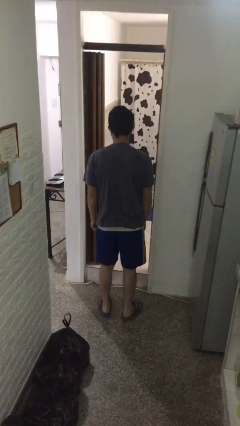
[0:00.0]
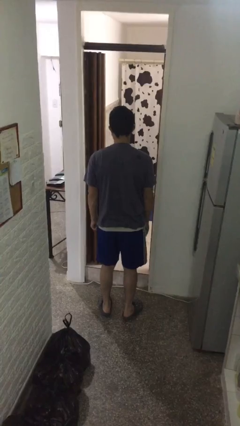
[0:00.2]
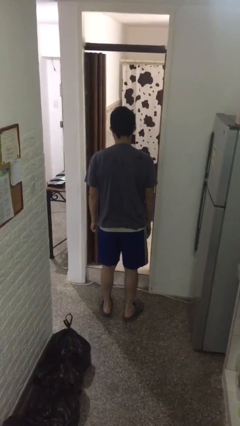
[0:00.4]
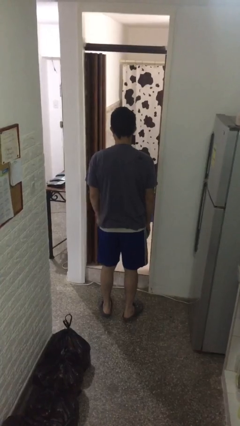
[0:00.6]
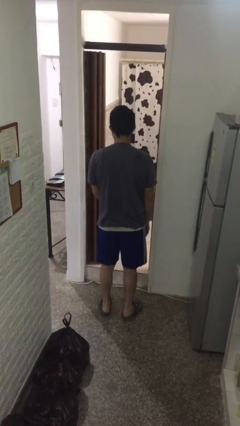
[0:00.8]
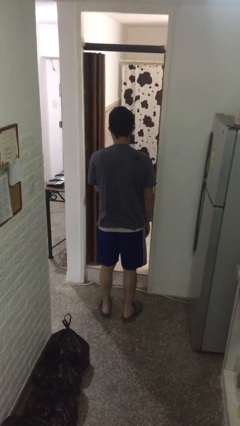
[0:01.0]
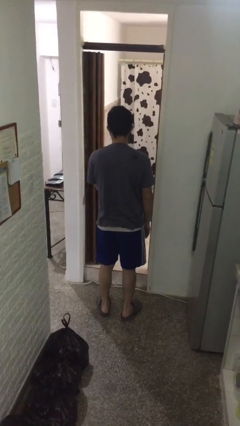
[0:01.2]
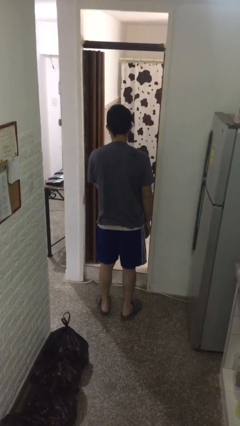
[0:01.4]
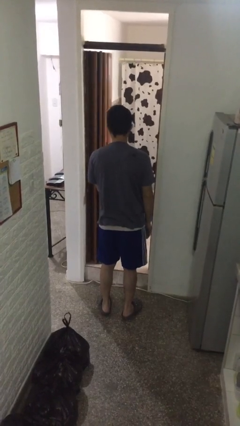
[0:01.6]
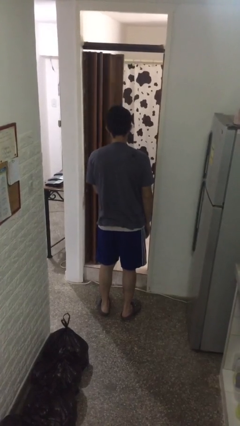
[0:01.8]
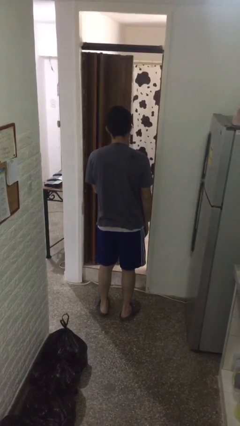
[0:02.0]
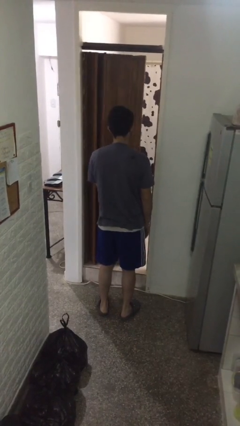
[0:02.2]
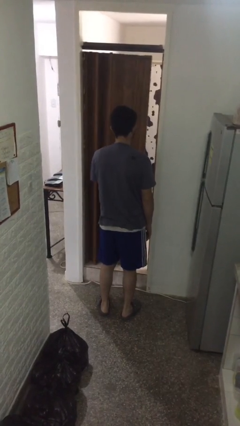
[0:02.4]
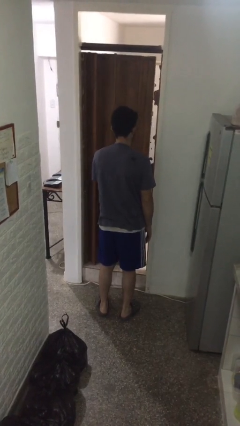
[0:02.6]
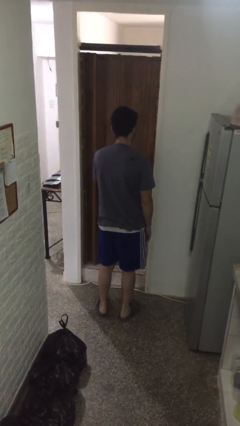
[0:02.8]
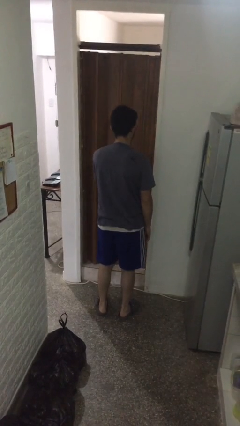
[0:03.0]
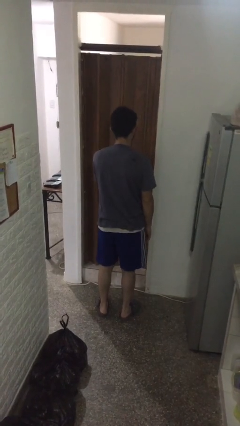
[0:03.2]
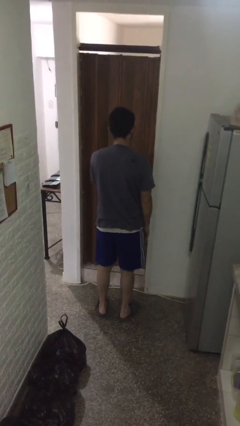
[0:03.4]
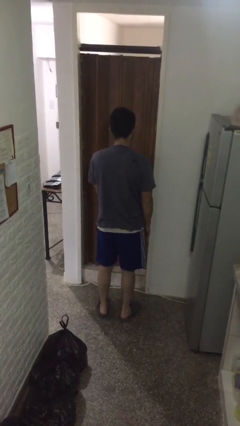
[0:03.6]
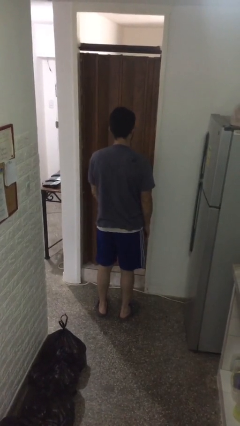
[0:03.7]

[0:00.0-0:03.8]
person closes sliding door

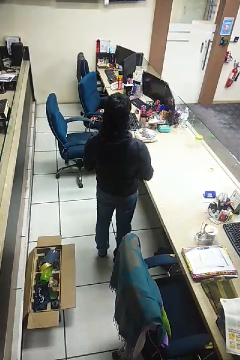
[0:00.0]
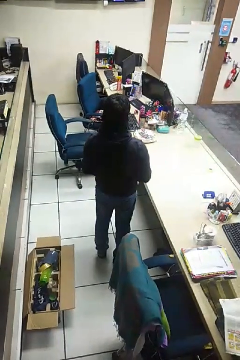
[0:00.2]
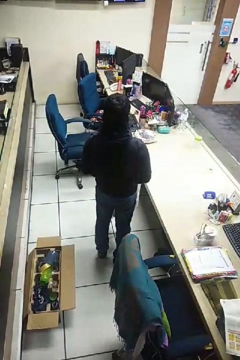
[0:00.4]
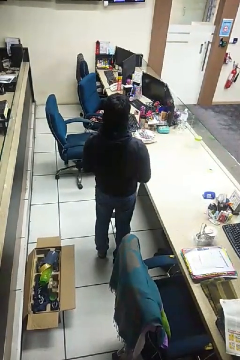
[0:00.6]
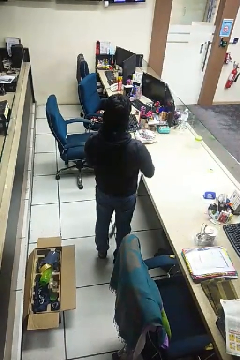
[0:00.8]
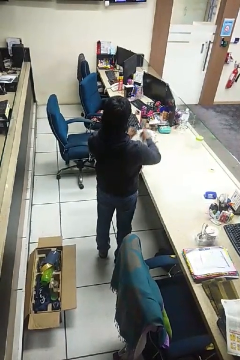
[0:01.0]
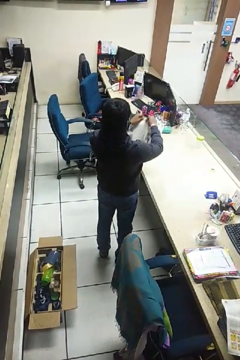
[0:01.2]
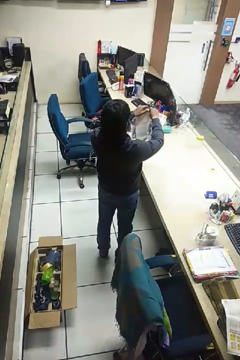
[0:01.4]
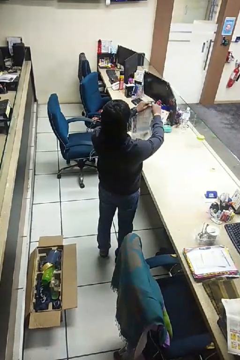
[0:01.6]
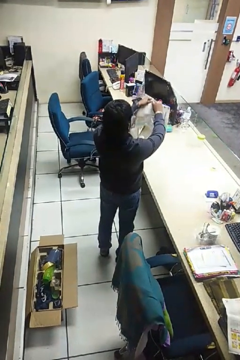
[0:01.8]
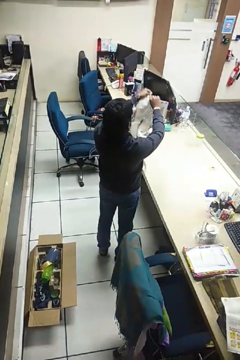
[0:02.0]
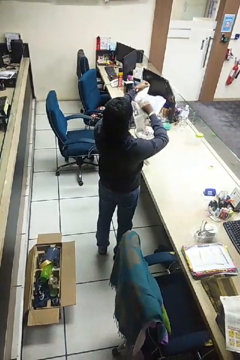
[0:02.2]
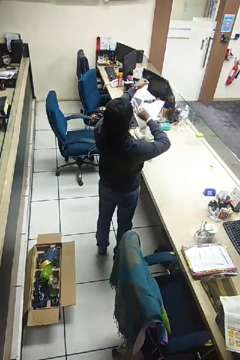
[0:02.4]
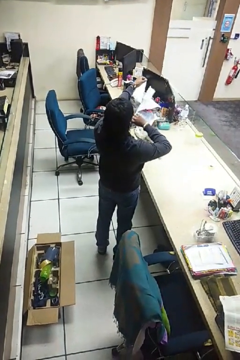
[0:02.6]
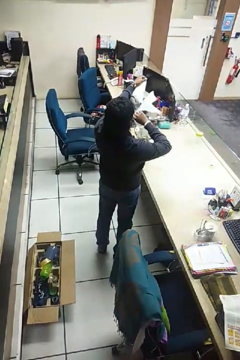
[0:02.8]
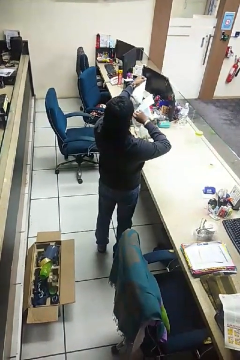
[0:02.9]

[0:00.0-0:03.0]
person tears paper

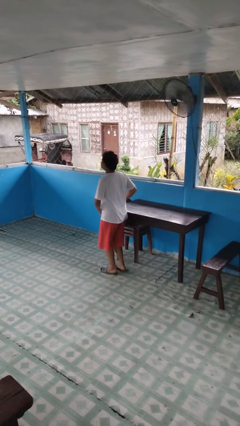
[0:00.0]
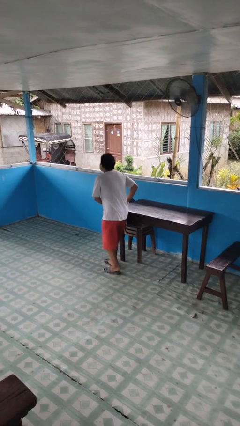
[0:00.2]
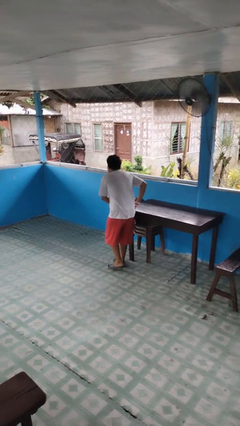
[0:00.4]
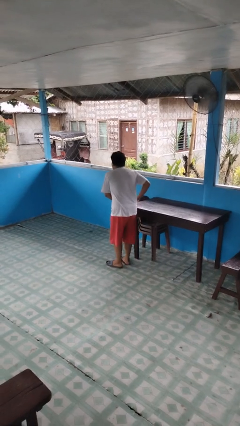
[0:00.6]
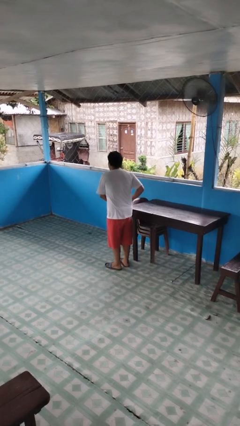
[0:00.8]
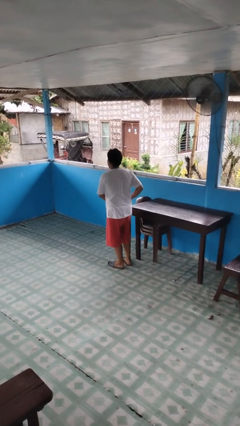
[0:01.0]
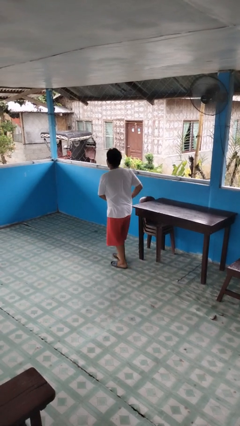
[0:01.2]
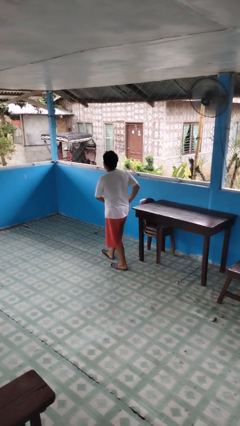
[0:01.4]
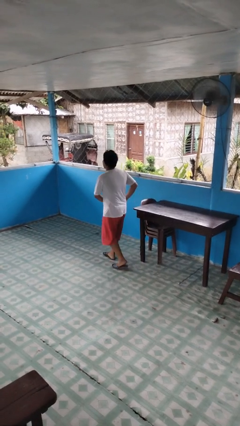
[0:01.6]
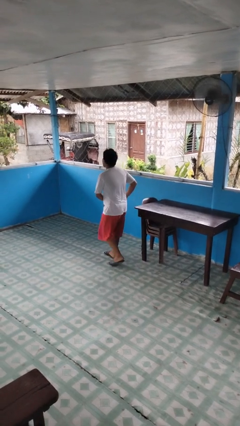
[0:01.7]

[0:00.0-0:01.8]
person bumps into table

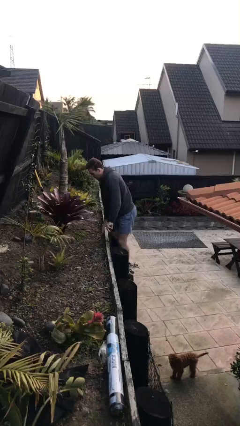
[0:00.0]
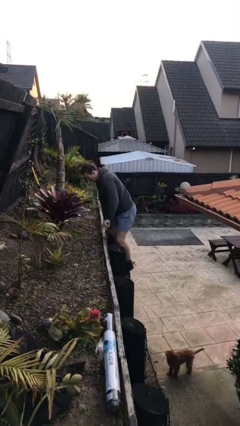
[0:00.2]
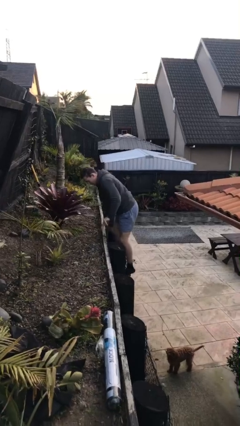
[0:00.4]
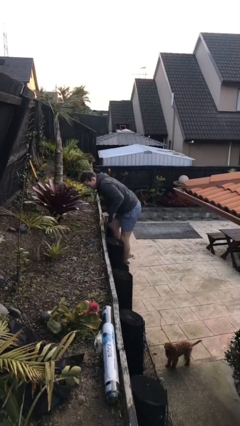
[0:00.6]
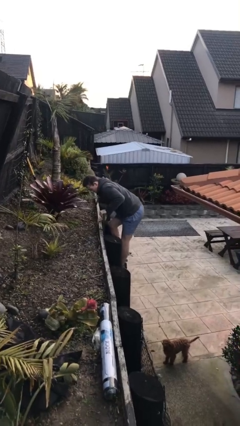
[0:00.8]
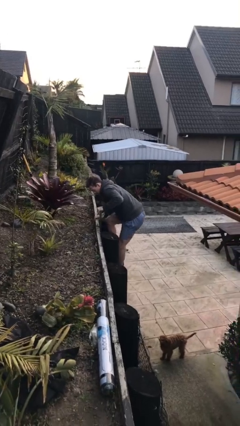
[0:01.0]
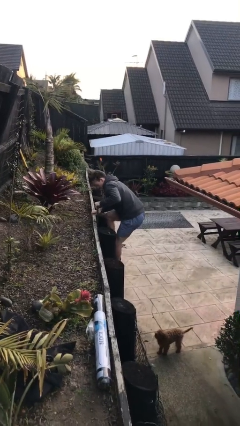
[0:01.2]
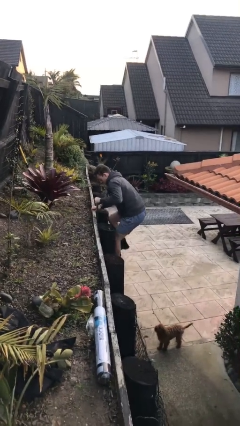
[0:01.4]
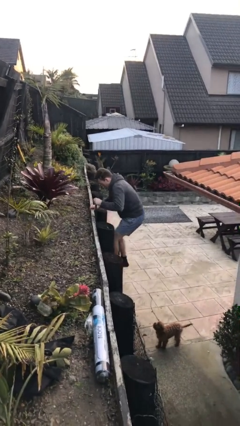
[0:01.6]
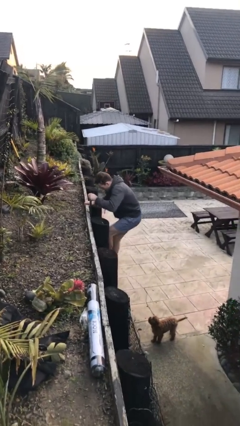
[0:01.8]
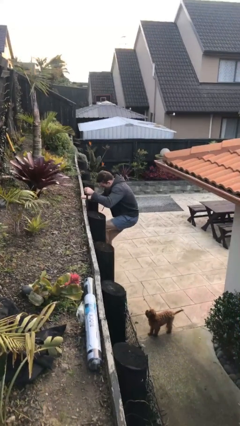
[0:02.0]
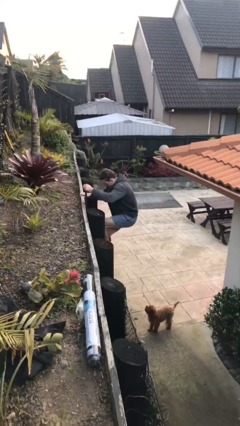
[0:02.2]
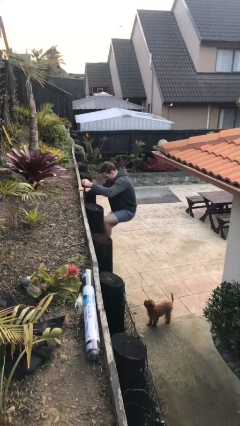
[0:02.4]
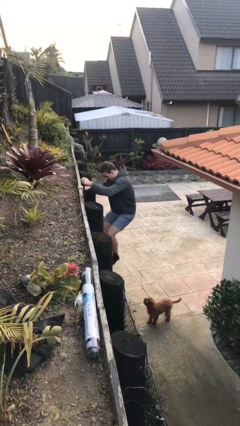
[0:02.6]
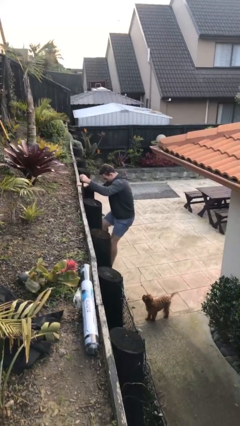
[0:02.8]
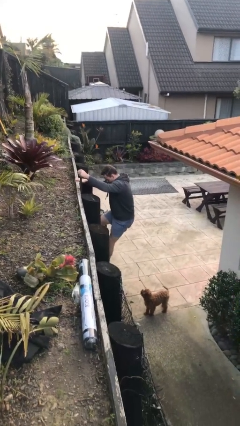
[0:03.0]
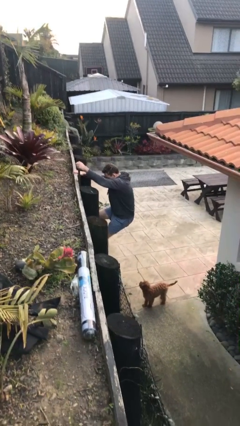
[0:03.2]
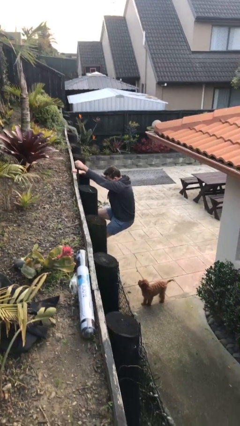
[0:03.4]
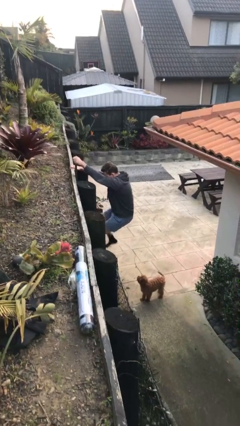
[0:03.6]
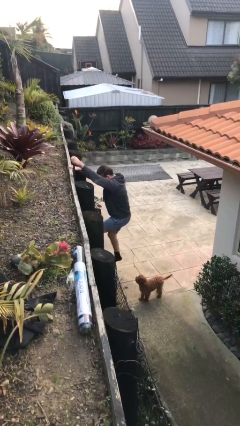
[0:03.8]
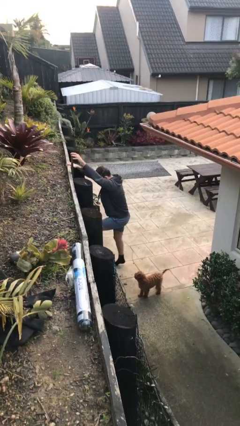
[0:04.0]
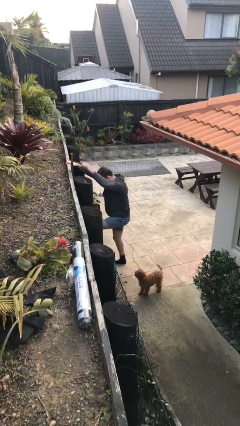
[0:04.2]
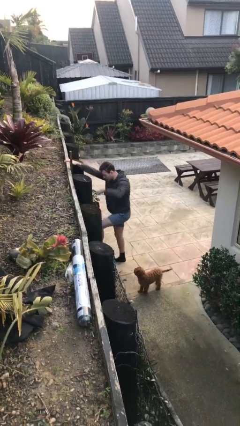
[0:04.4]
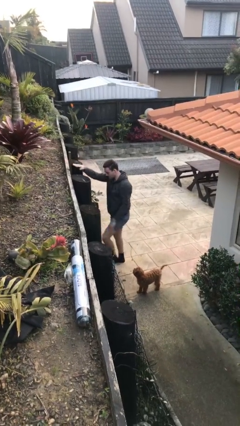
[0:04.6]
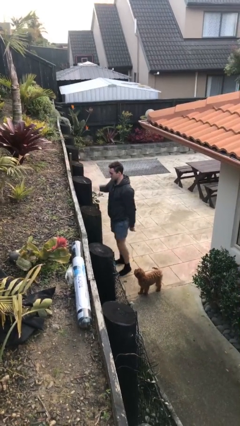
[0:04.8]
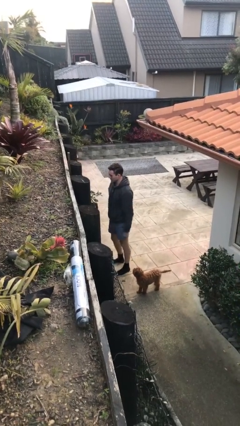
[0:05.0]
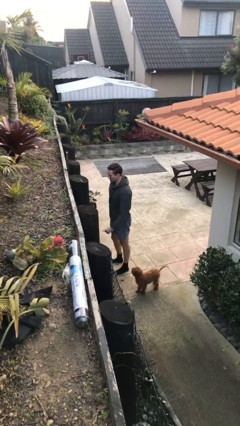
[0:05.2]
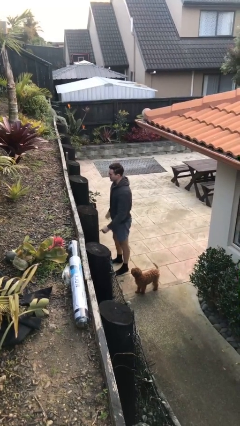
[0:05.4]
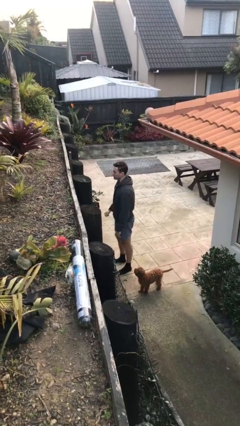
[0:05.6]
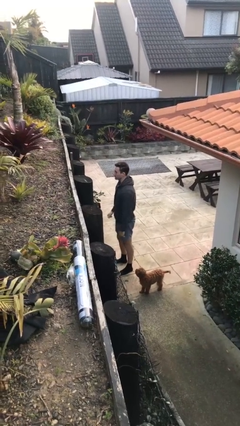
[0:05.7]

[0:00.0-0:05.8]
person climbs down ladder

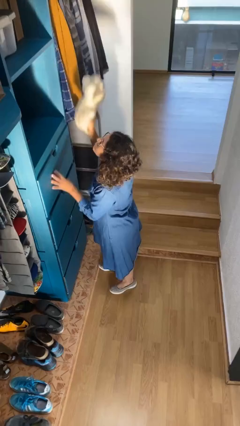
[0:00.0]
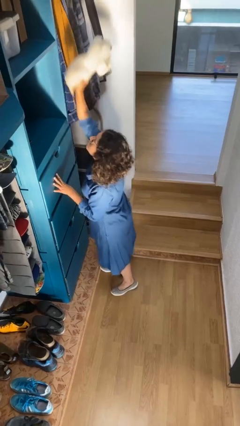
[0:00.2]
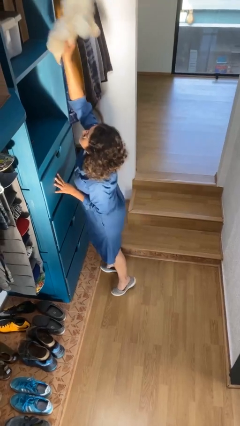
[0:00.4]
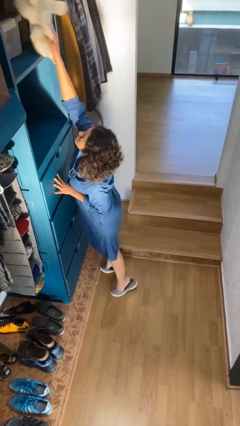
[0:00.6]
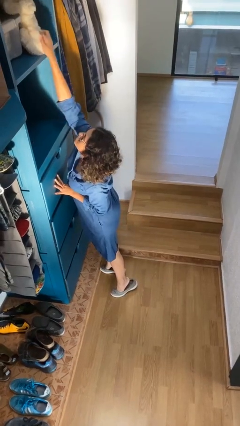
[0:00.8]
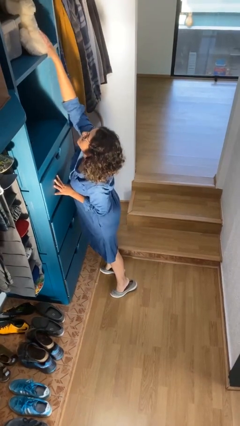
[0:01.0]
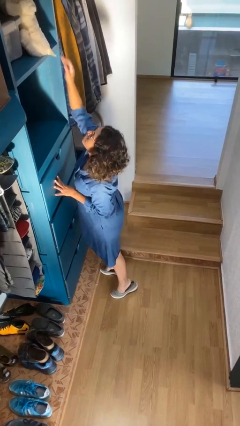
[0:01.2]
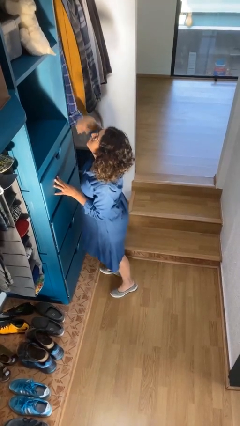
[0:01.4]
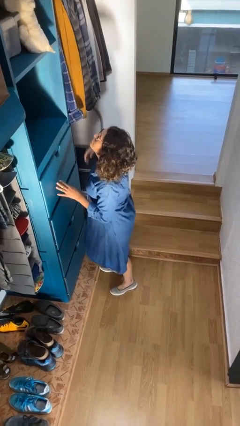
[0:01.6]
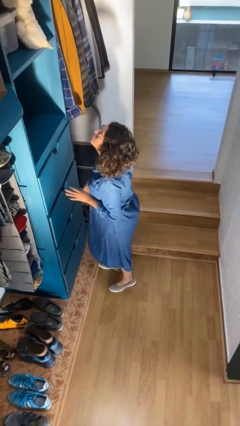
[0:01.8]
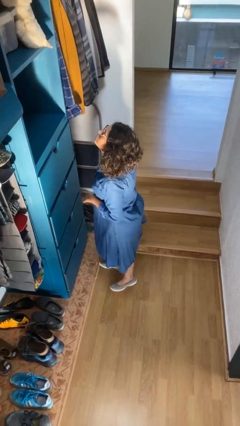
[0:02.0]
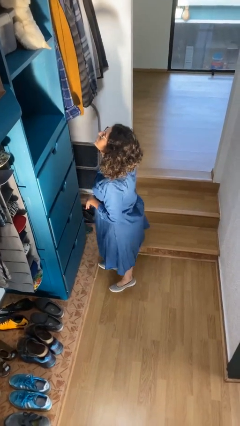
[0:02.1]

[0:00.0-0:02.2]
person puts down object on shelf

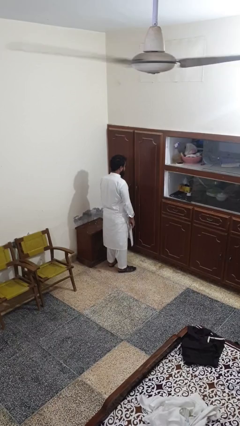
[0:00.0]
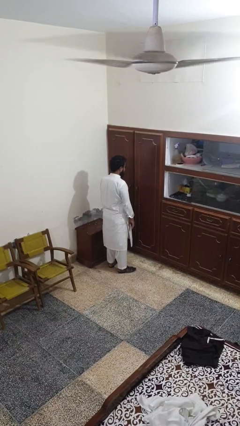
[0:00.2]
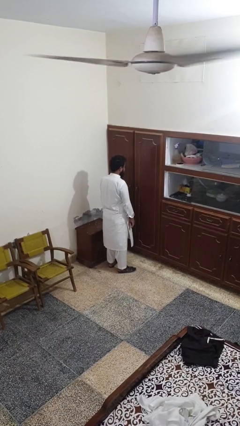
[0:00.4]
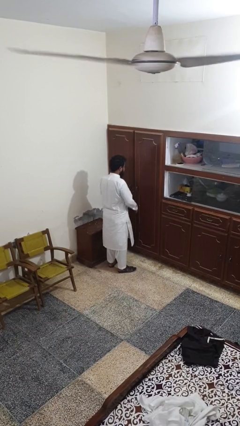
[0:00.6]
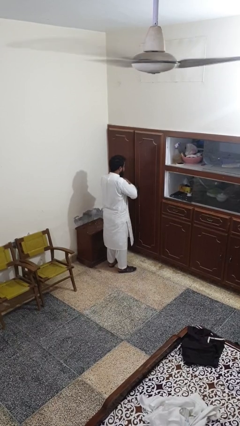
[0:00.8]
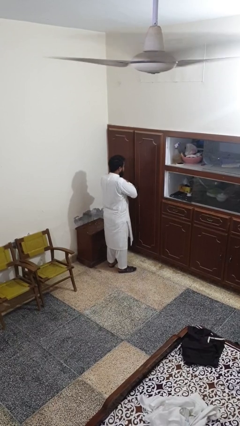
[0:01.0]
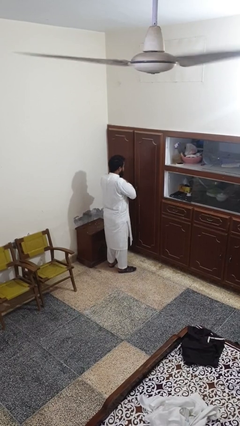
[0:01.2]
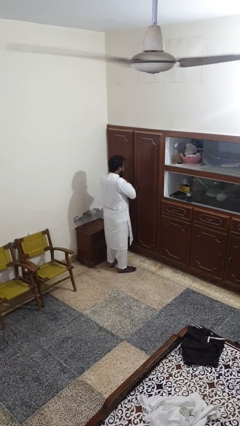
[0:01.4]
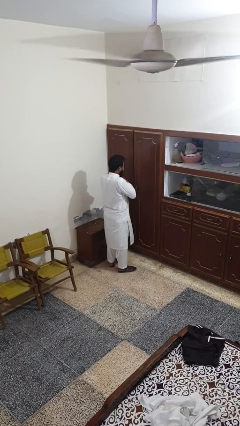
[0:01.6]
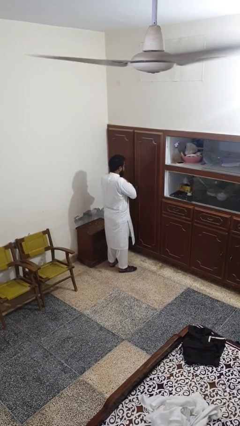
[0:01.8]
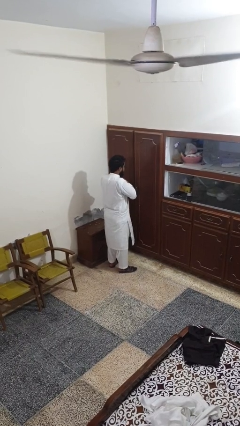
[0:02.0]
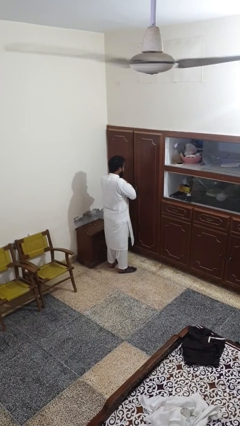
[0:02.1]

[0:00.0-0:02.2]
person prays
